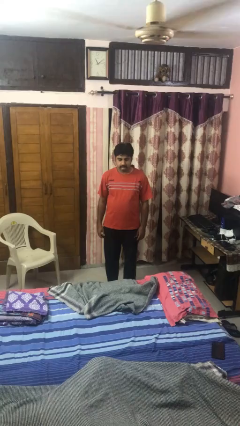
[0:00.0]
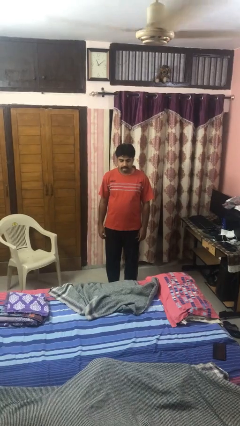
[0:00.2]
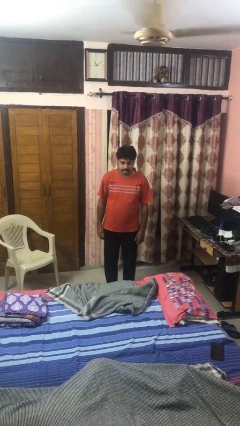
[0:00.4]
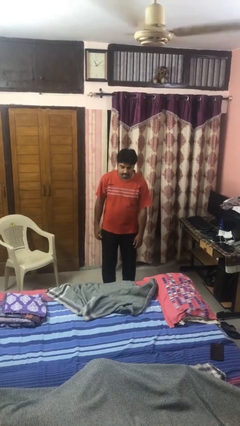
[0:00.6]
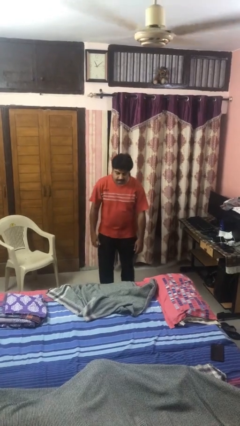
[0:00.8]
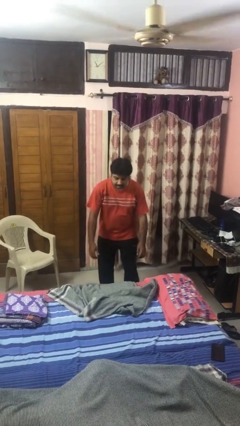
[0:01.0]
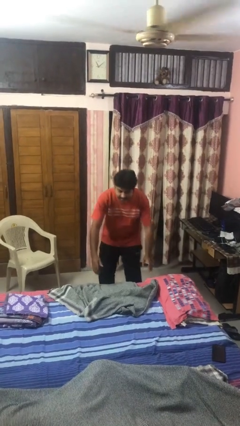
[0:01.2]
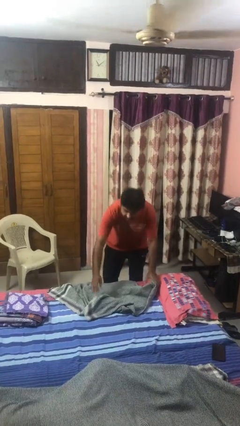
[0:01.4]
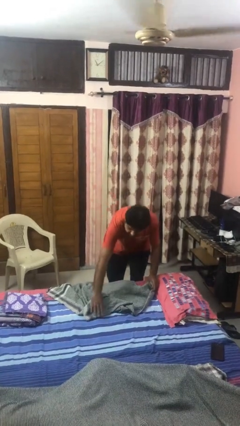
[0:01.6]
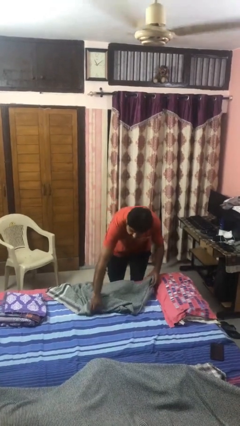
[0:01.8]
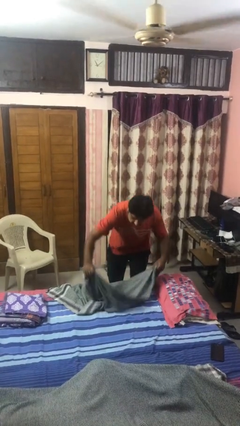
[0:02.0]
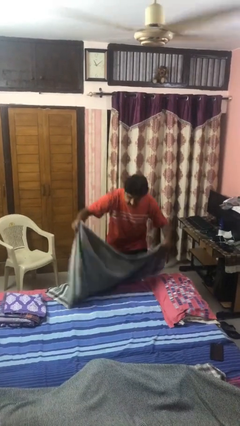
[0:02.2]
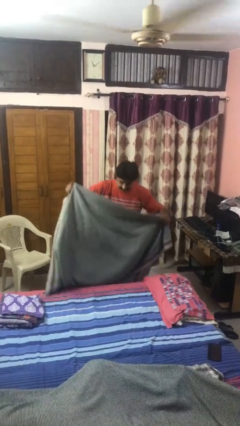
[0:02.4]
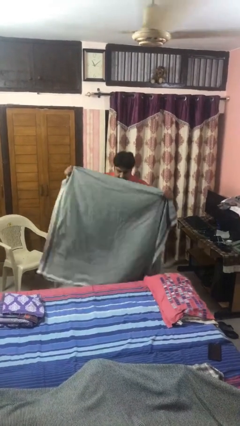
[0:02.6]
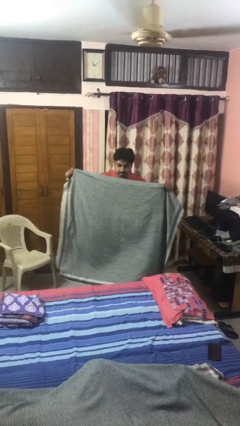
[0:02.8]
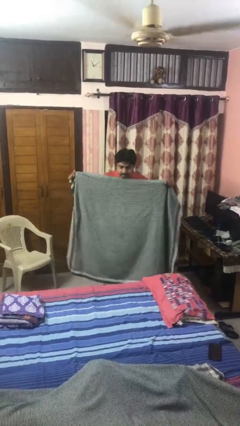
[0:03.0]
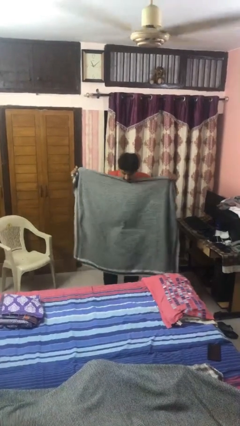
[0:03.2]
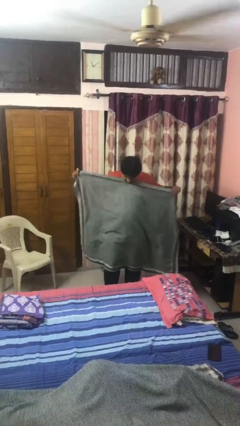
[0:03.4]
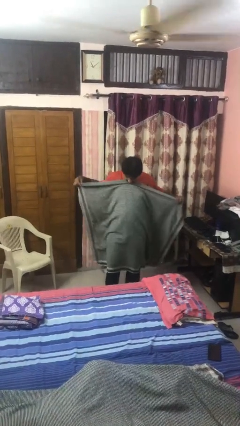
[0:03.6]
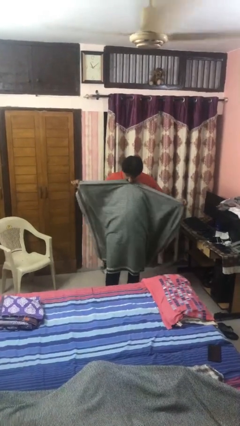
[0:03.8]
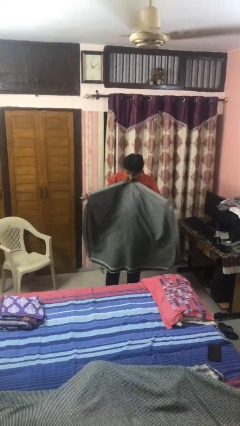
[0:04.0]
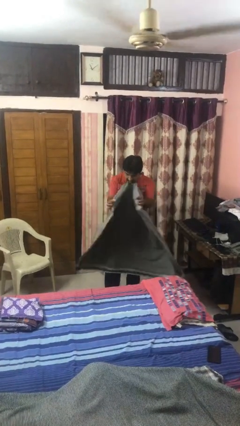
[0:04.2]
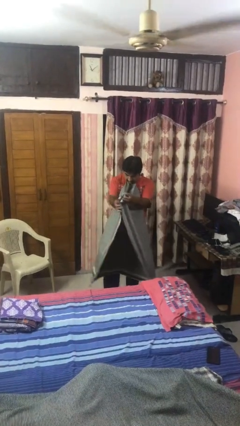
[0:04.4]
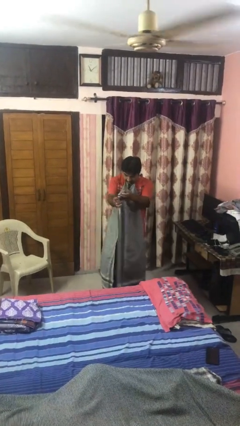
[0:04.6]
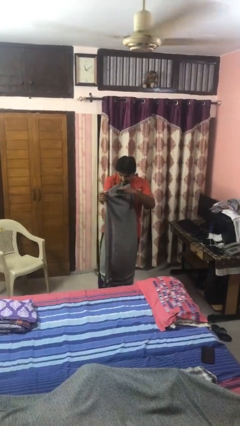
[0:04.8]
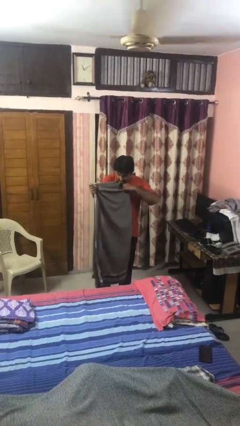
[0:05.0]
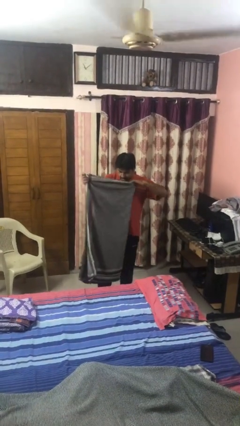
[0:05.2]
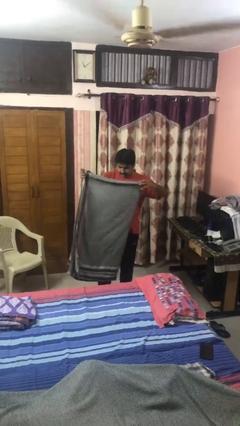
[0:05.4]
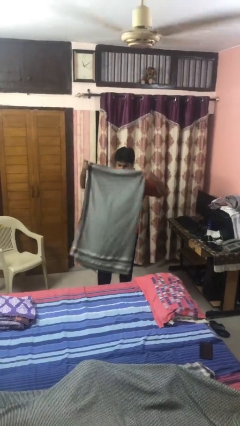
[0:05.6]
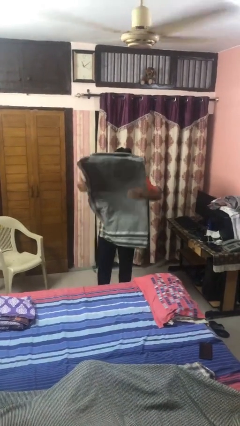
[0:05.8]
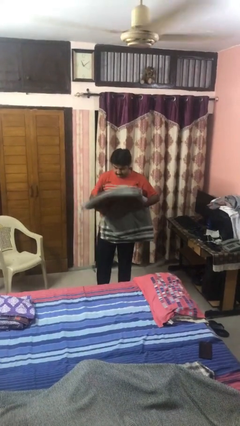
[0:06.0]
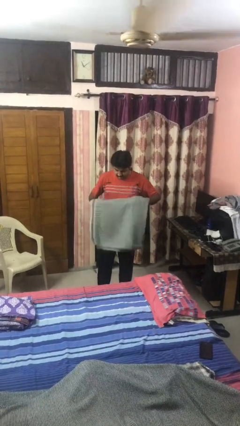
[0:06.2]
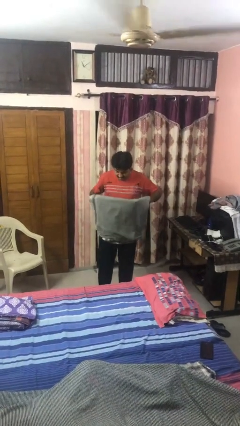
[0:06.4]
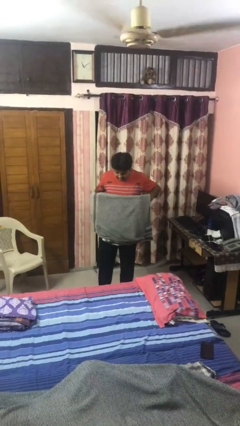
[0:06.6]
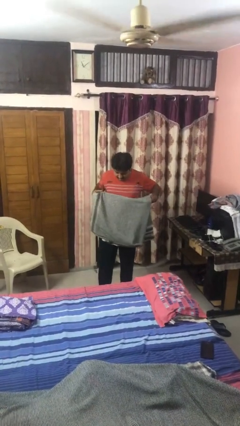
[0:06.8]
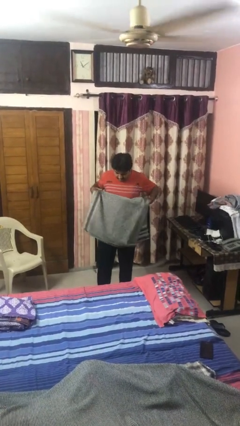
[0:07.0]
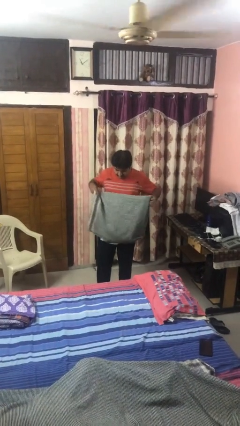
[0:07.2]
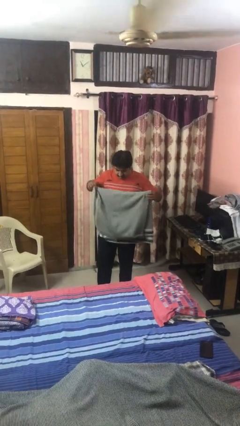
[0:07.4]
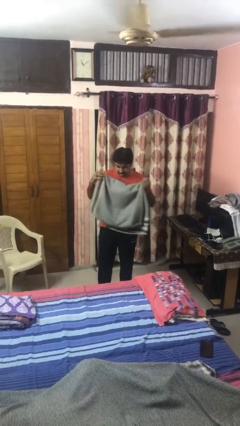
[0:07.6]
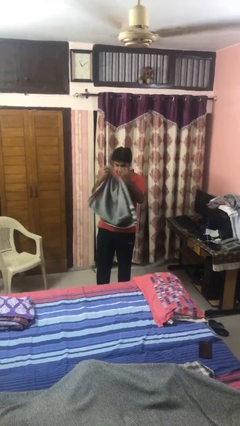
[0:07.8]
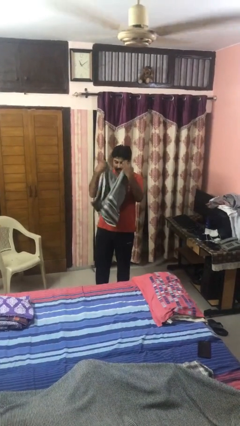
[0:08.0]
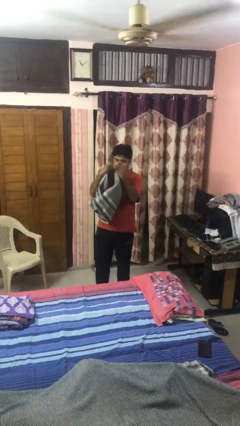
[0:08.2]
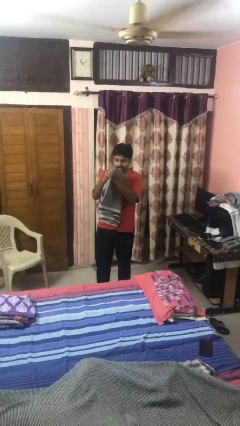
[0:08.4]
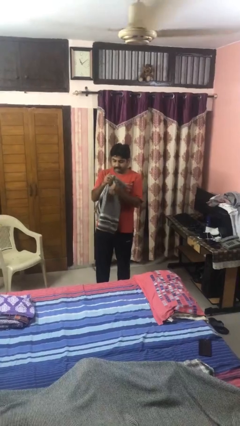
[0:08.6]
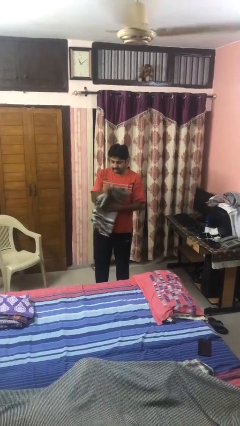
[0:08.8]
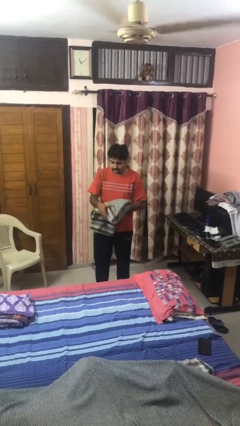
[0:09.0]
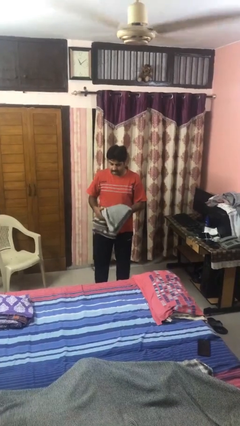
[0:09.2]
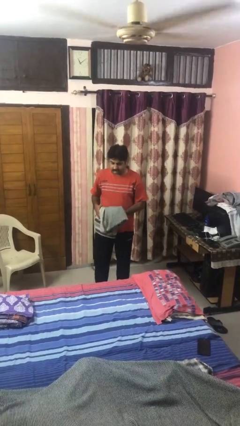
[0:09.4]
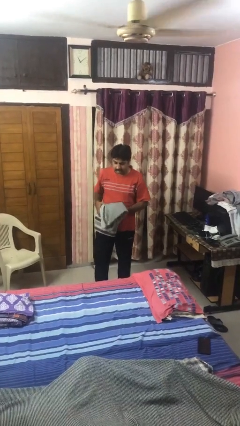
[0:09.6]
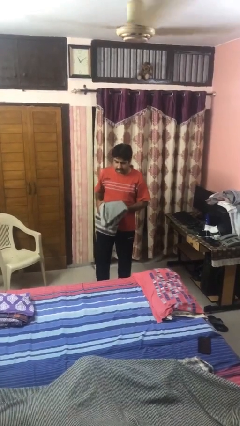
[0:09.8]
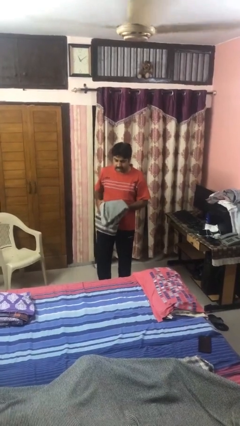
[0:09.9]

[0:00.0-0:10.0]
person folds blanket

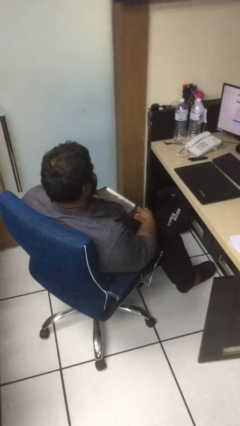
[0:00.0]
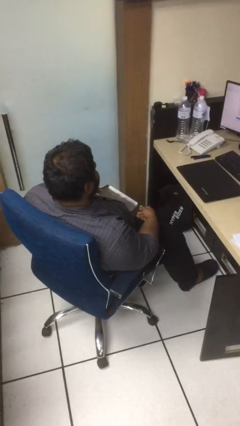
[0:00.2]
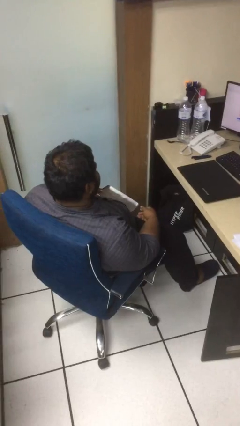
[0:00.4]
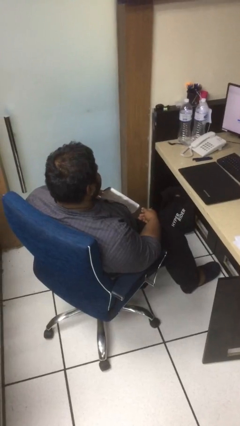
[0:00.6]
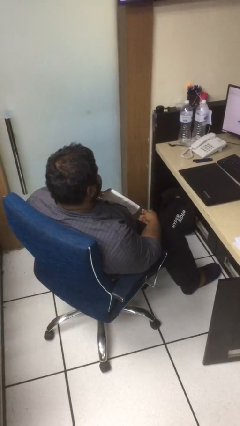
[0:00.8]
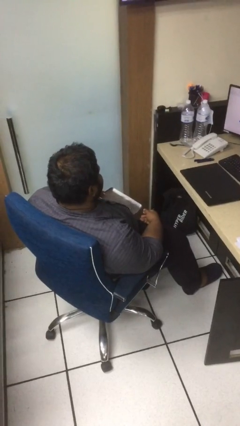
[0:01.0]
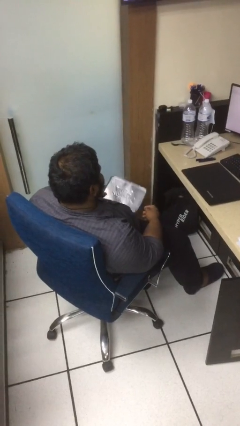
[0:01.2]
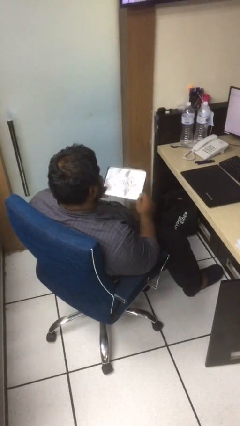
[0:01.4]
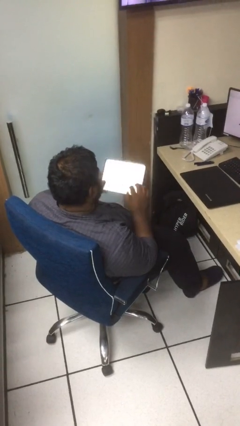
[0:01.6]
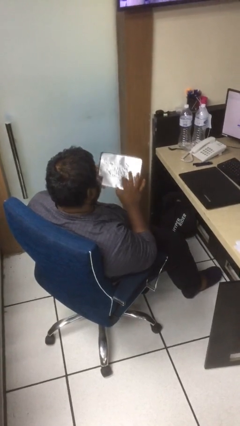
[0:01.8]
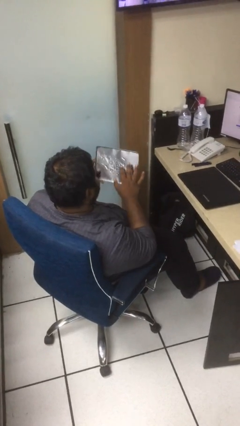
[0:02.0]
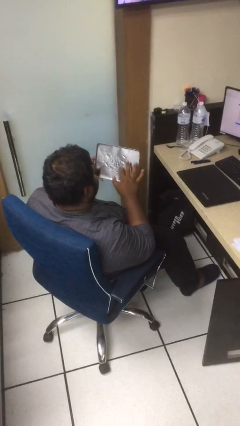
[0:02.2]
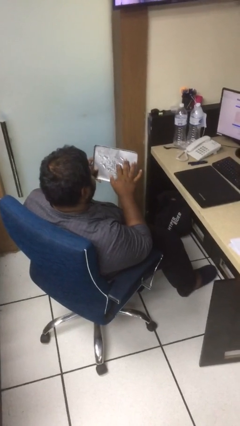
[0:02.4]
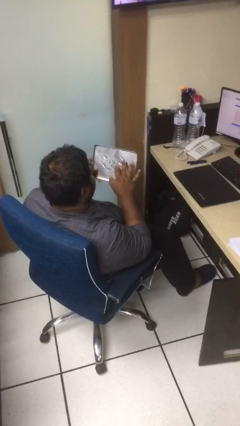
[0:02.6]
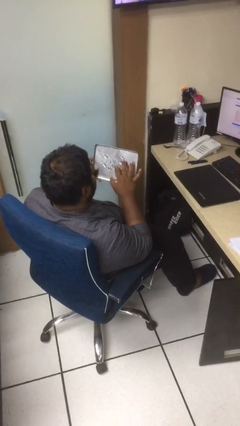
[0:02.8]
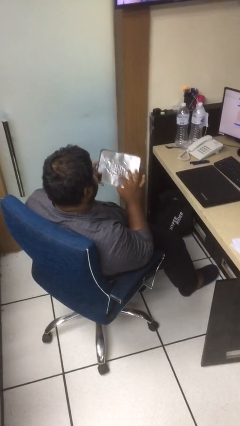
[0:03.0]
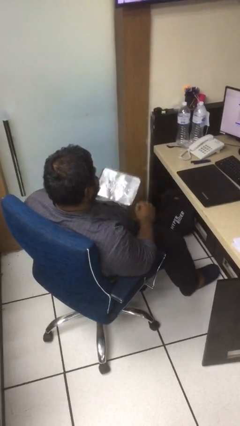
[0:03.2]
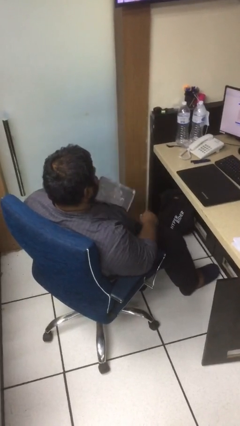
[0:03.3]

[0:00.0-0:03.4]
person interacts with tablet

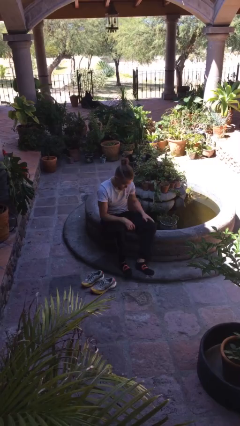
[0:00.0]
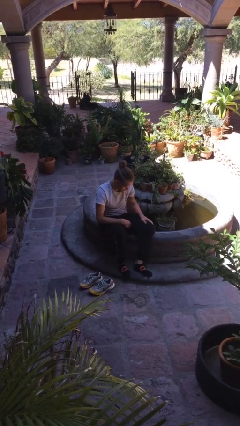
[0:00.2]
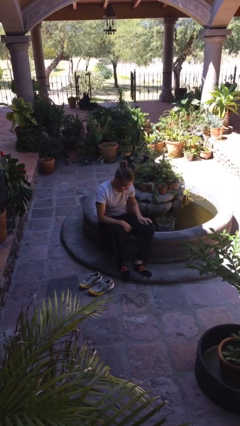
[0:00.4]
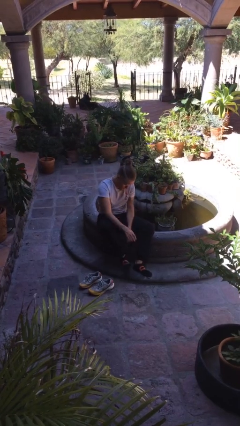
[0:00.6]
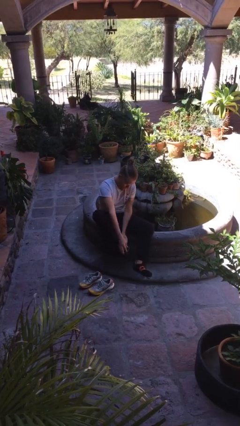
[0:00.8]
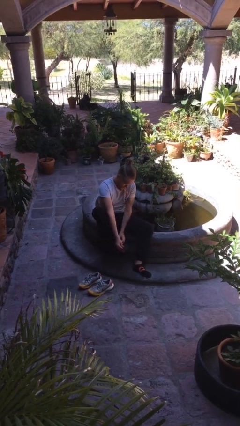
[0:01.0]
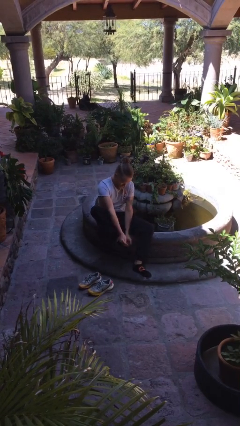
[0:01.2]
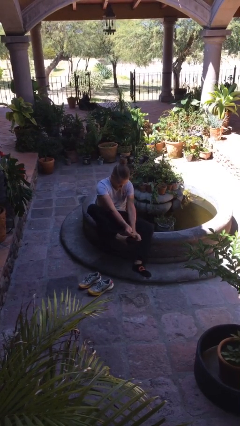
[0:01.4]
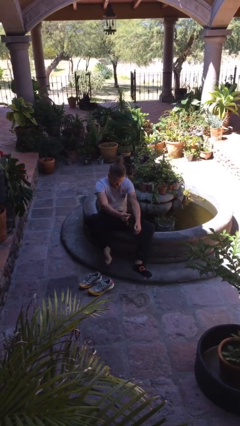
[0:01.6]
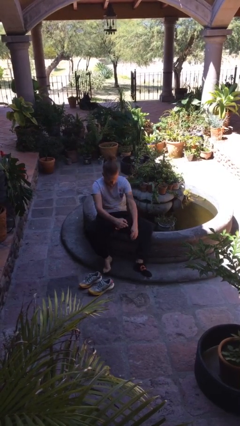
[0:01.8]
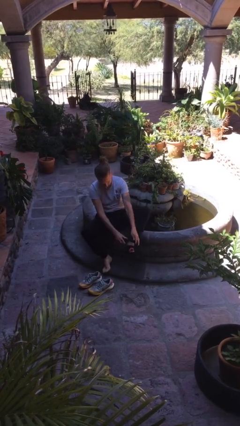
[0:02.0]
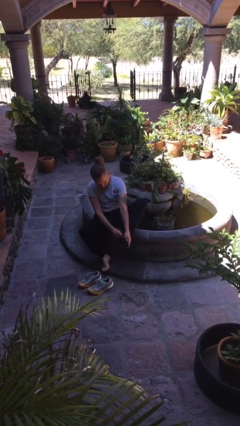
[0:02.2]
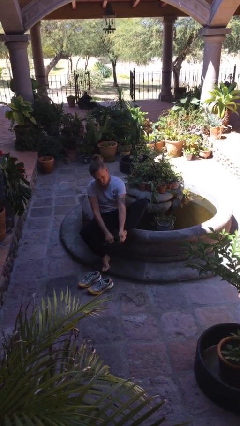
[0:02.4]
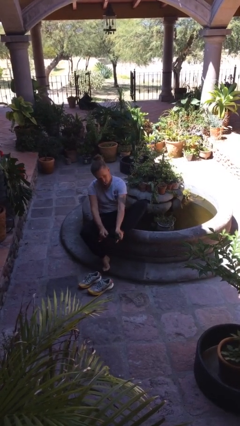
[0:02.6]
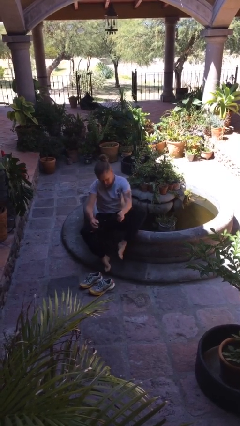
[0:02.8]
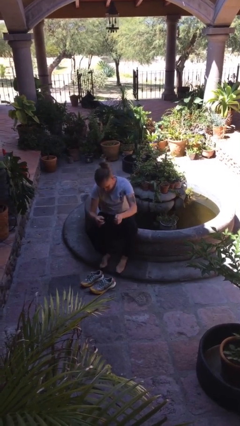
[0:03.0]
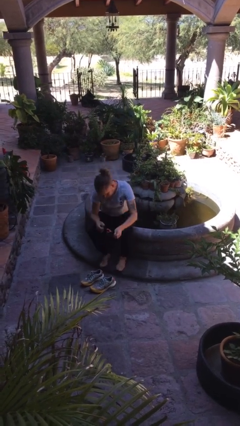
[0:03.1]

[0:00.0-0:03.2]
person takes off socks

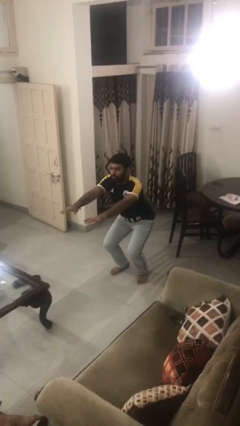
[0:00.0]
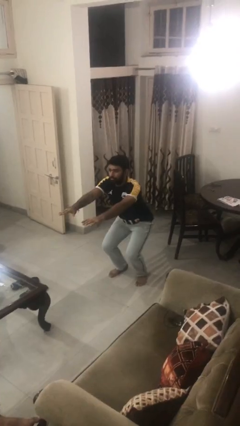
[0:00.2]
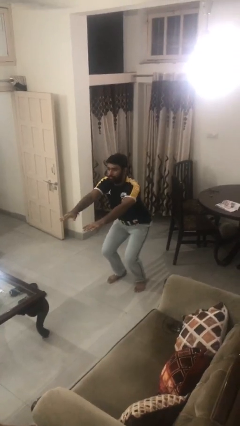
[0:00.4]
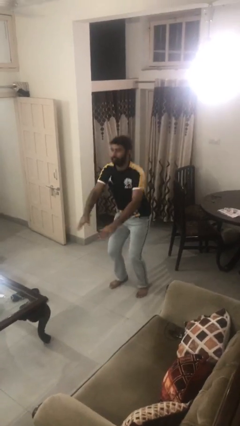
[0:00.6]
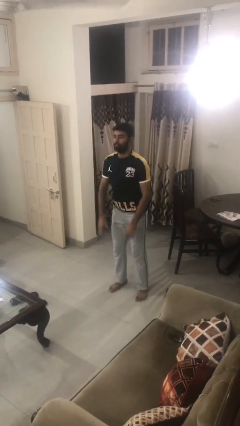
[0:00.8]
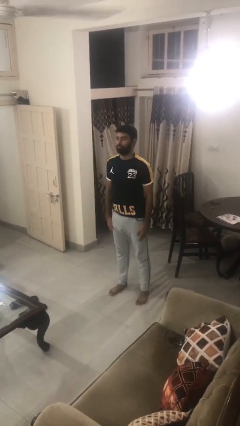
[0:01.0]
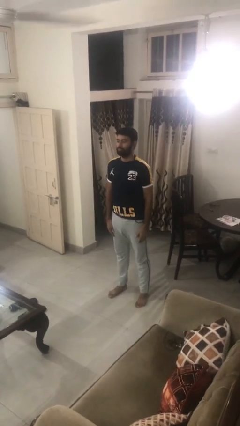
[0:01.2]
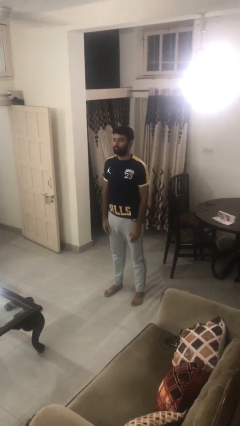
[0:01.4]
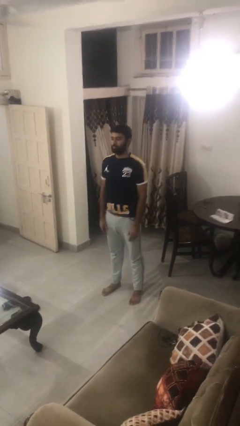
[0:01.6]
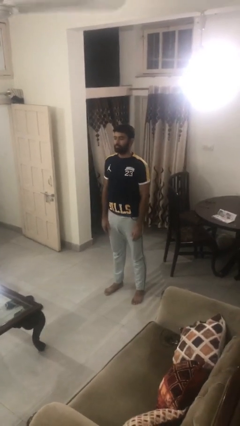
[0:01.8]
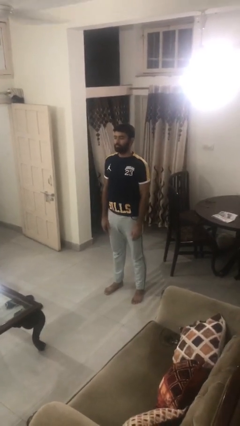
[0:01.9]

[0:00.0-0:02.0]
person stands up
